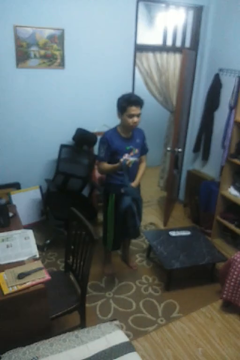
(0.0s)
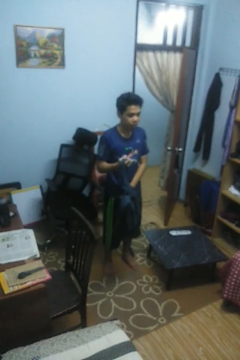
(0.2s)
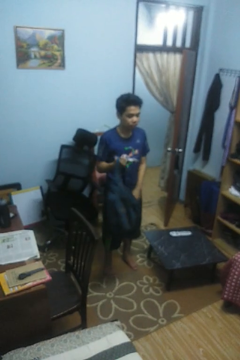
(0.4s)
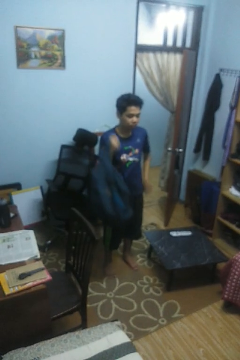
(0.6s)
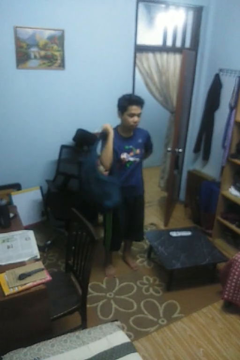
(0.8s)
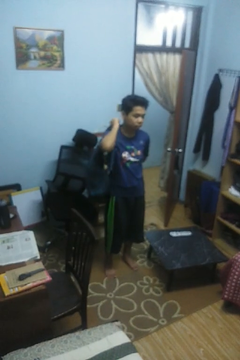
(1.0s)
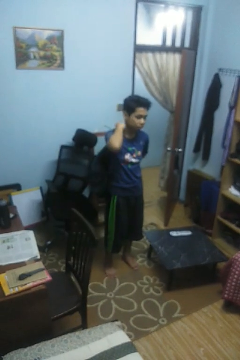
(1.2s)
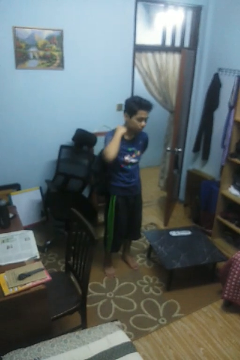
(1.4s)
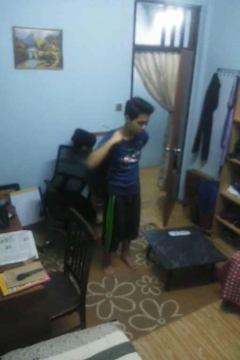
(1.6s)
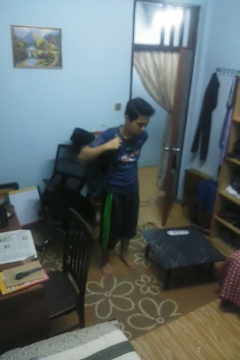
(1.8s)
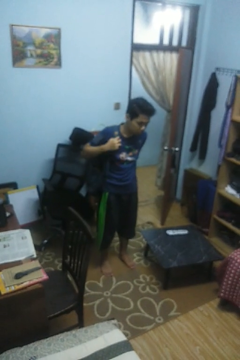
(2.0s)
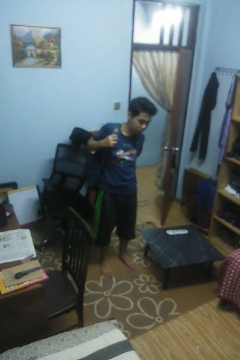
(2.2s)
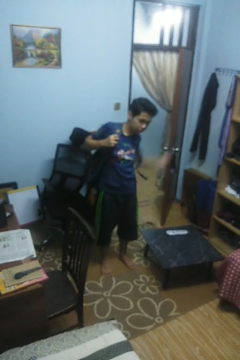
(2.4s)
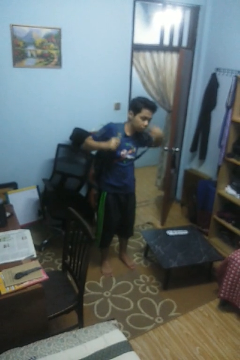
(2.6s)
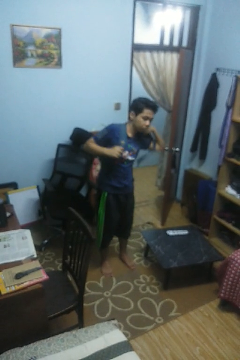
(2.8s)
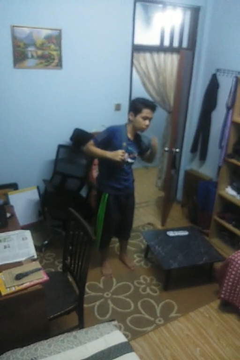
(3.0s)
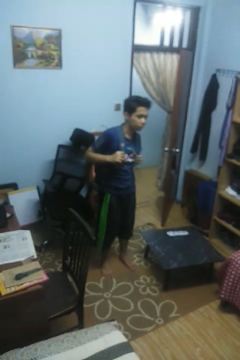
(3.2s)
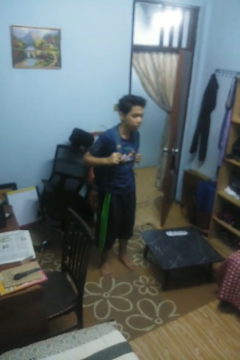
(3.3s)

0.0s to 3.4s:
person puts on backpack

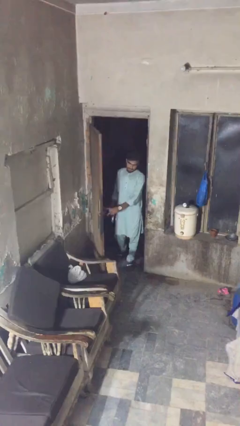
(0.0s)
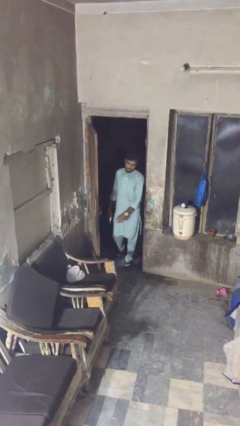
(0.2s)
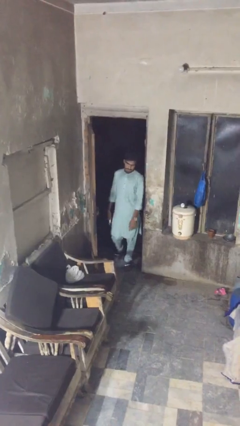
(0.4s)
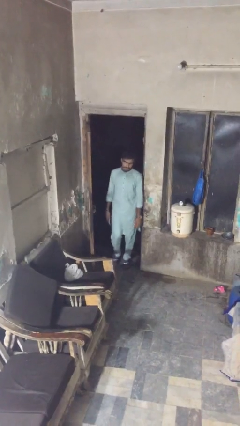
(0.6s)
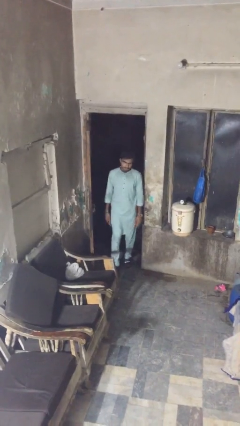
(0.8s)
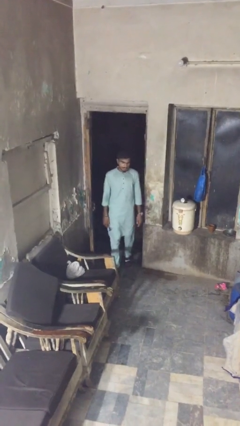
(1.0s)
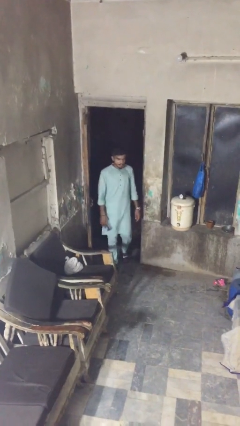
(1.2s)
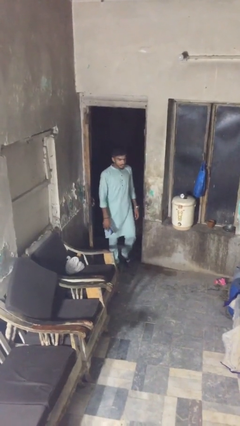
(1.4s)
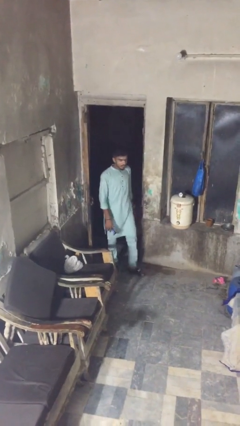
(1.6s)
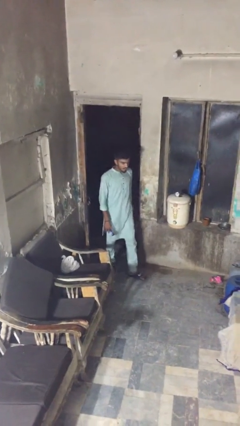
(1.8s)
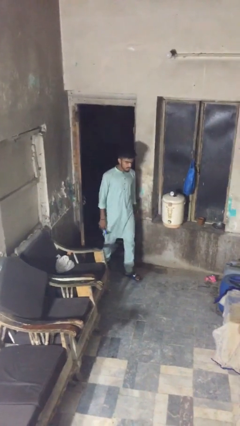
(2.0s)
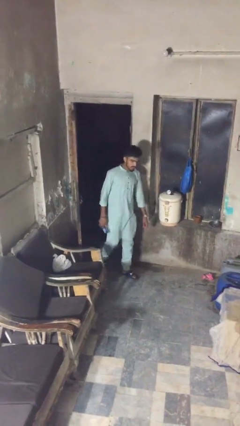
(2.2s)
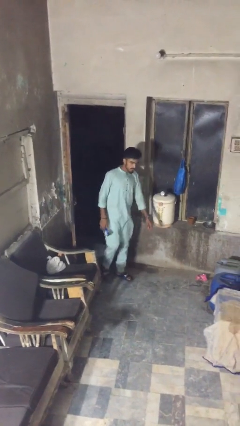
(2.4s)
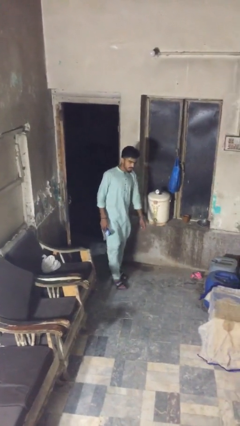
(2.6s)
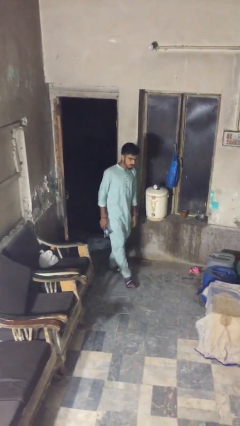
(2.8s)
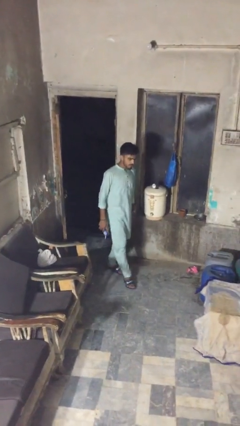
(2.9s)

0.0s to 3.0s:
person enters scene through structure

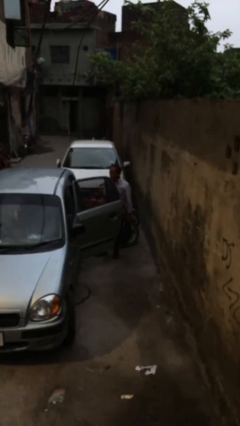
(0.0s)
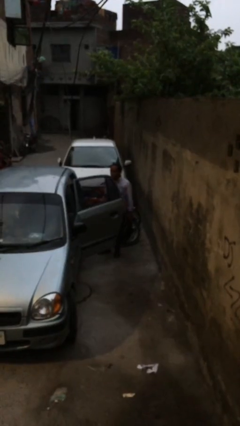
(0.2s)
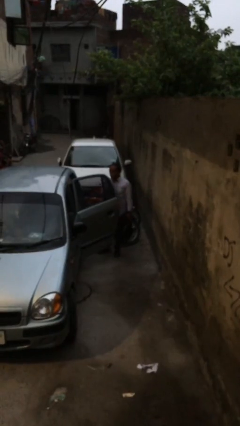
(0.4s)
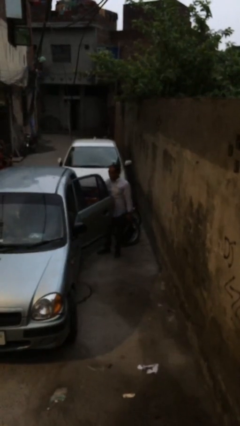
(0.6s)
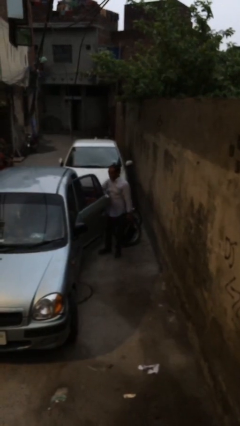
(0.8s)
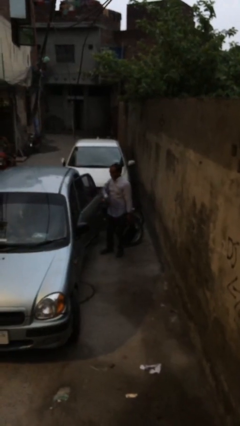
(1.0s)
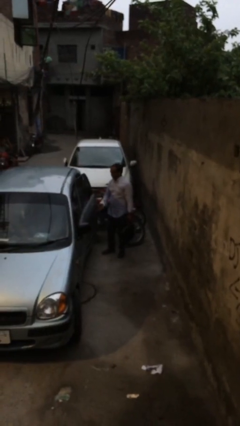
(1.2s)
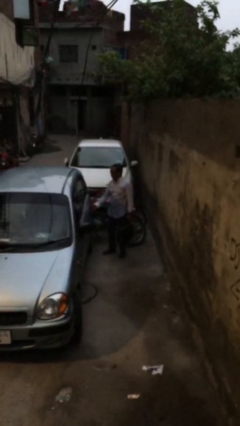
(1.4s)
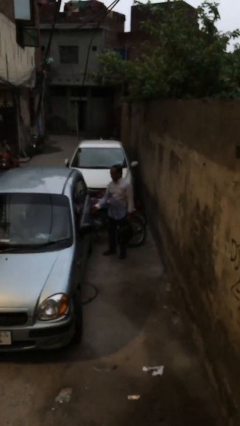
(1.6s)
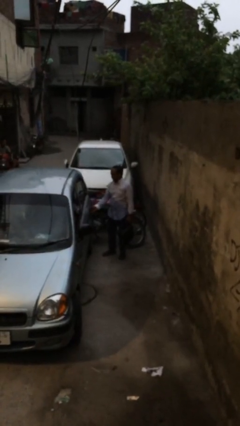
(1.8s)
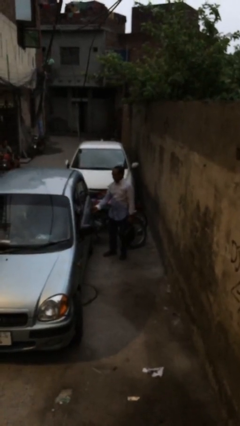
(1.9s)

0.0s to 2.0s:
person closes car door

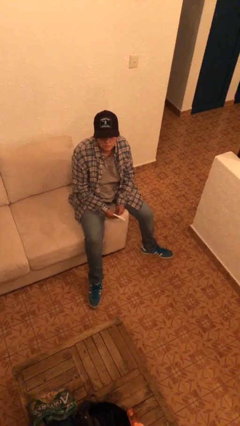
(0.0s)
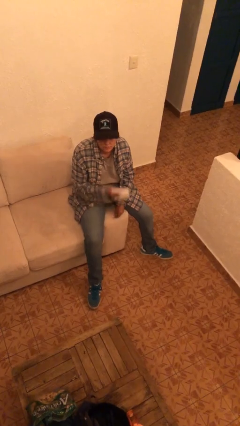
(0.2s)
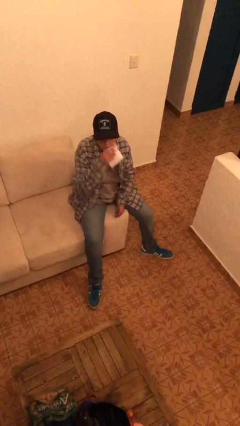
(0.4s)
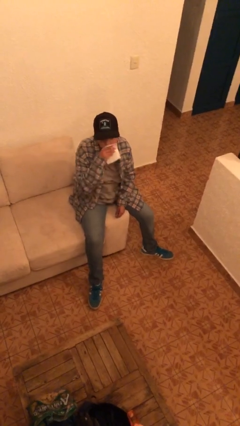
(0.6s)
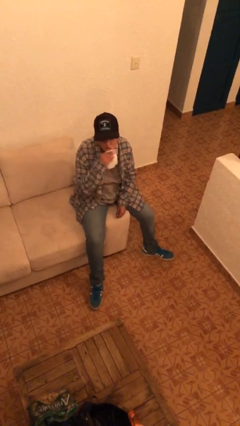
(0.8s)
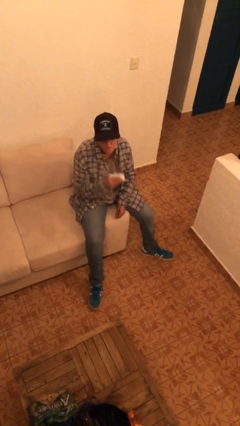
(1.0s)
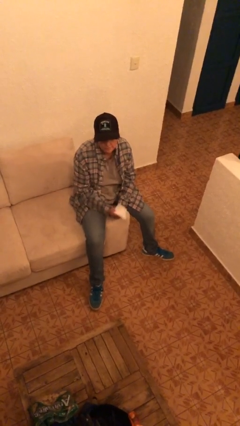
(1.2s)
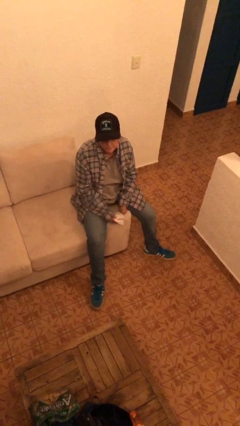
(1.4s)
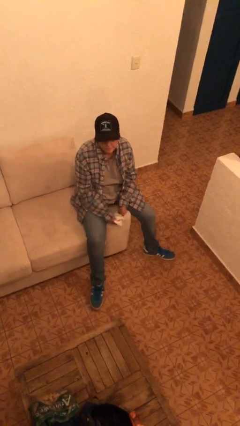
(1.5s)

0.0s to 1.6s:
person wipes mouth with napkin

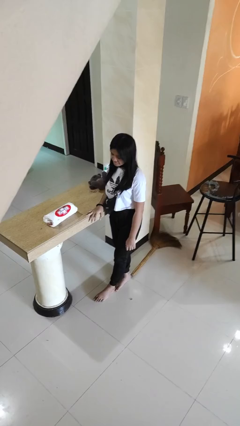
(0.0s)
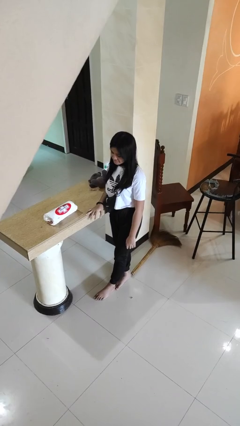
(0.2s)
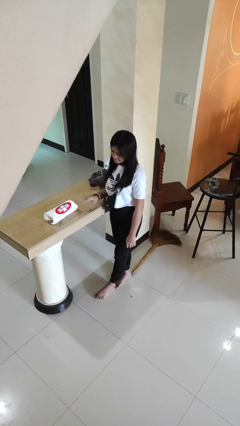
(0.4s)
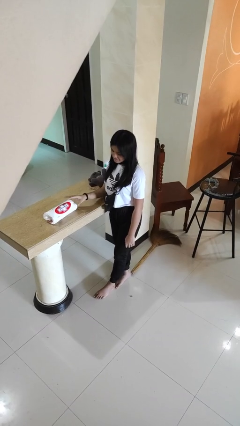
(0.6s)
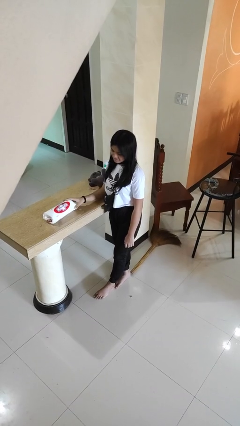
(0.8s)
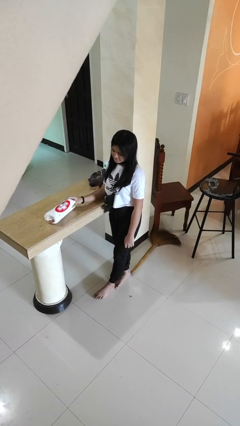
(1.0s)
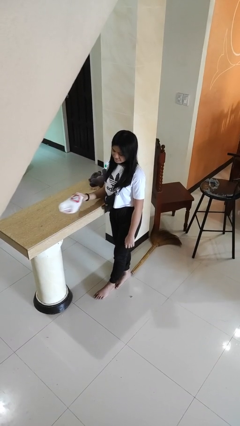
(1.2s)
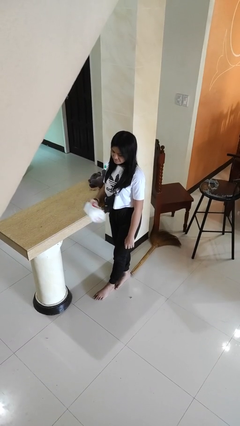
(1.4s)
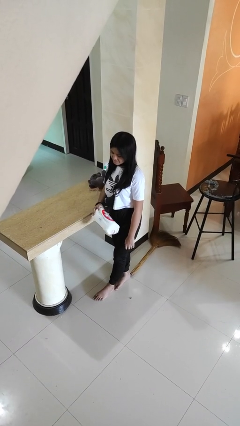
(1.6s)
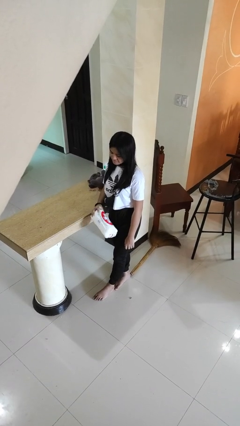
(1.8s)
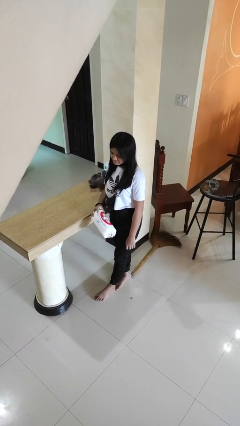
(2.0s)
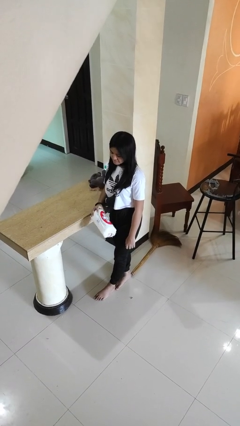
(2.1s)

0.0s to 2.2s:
person picks up object from countertop

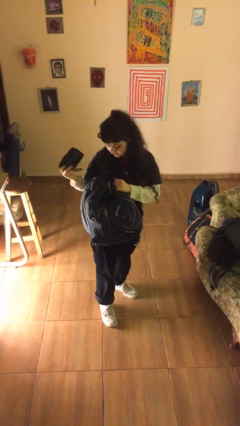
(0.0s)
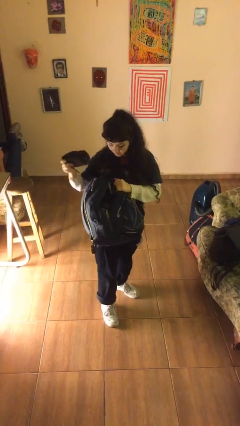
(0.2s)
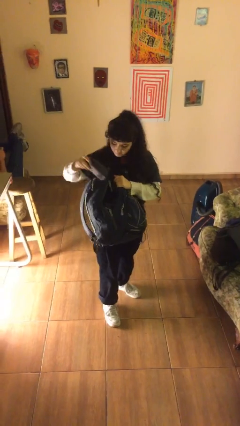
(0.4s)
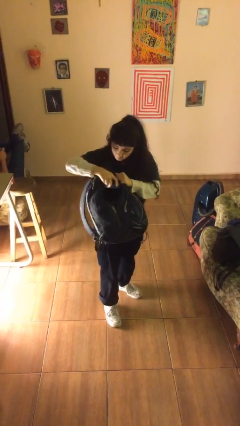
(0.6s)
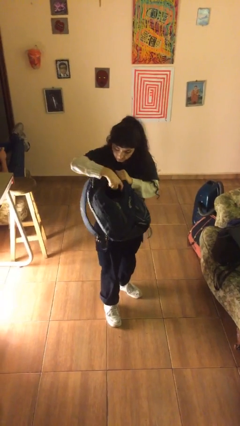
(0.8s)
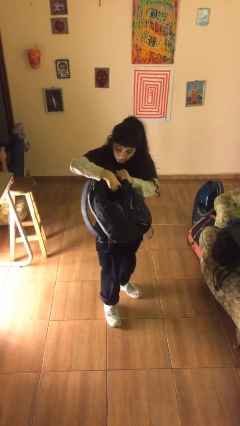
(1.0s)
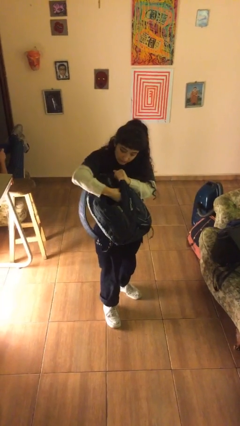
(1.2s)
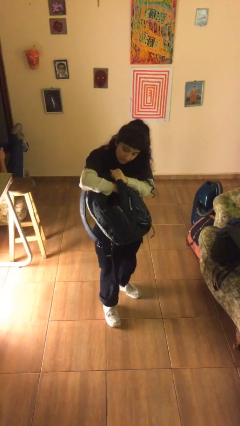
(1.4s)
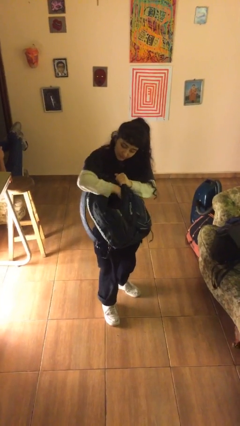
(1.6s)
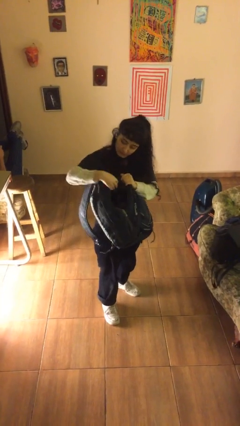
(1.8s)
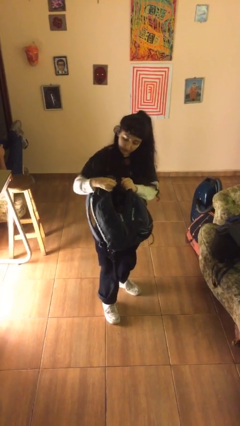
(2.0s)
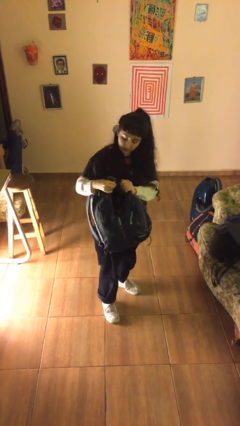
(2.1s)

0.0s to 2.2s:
person puts object into backpack

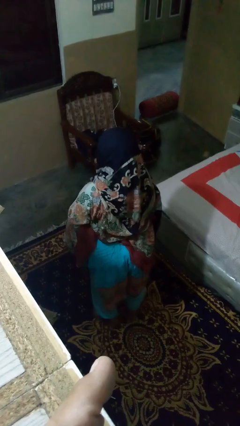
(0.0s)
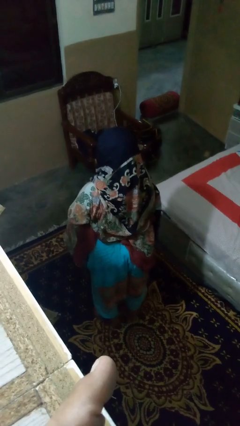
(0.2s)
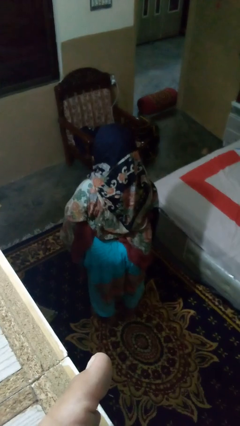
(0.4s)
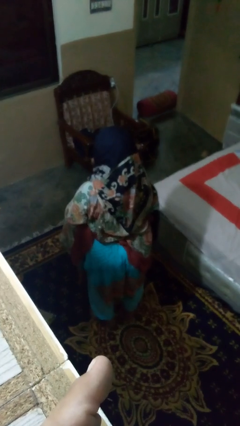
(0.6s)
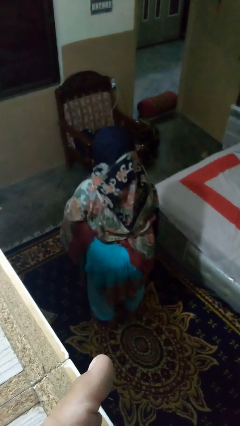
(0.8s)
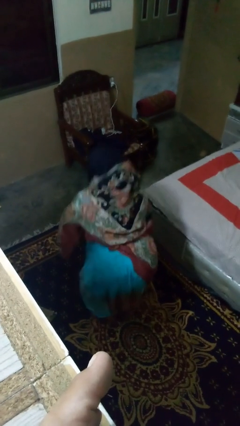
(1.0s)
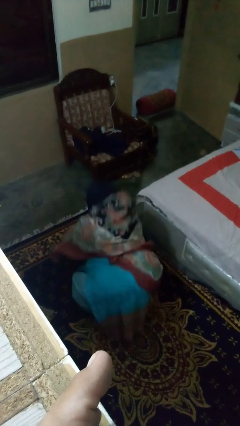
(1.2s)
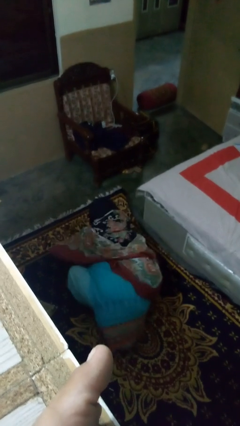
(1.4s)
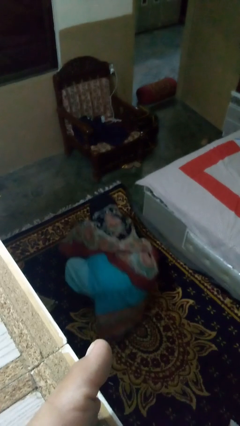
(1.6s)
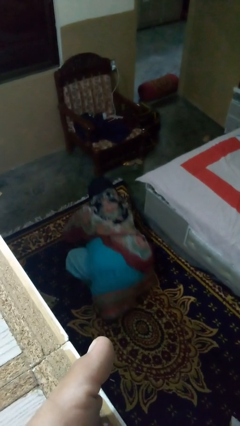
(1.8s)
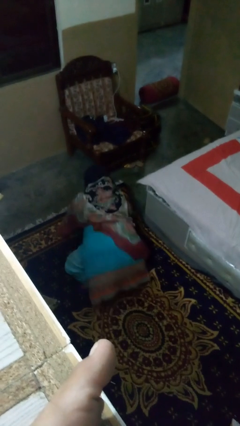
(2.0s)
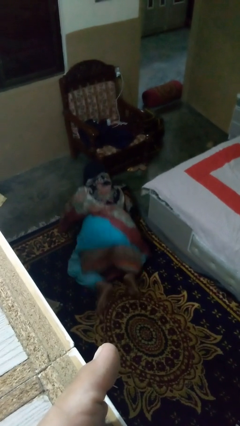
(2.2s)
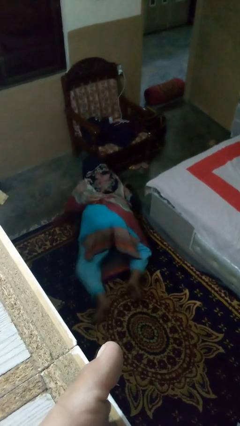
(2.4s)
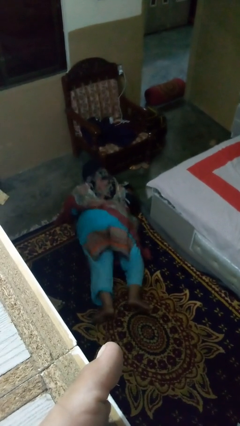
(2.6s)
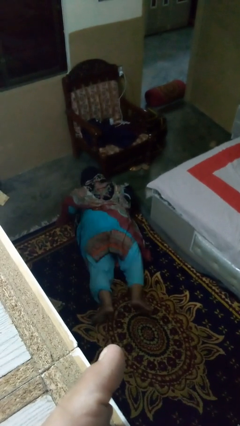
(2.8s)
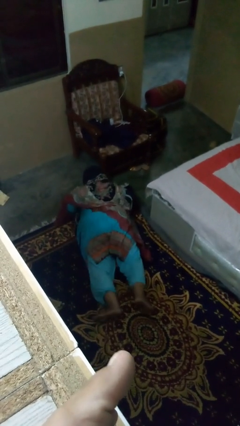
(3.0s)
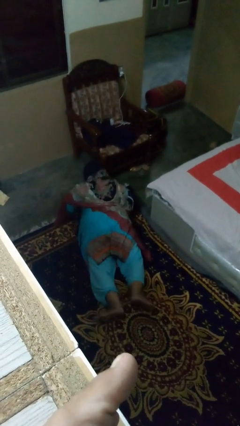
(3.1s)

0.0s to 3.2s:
person exercises with pushup

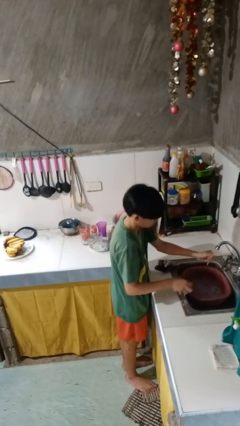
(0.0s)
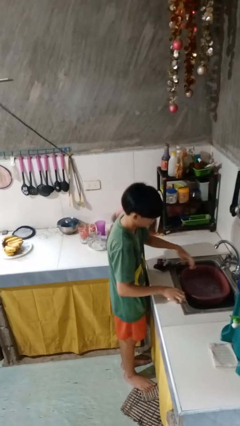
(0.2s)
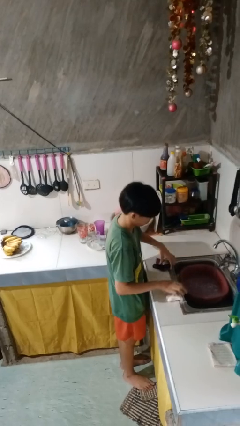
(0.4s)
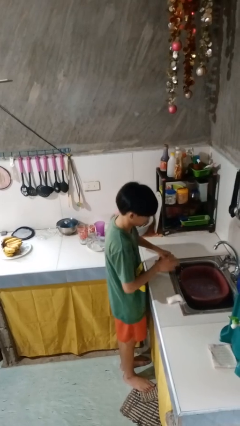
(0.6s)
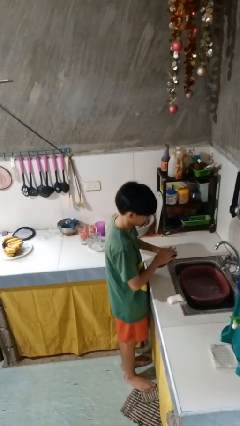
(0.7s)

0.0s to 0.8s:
person dries hands with towel
